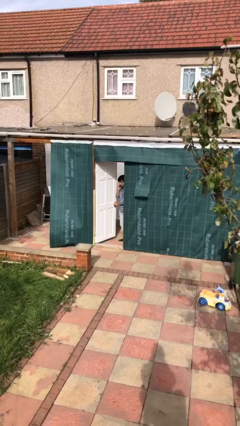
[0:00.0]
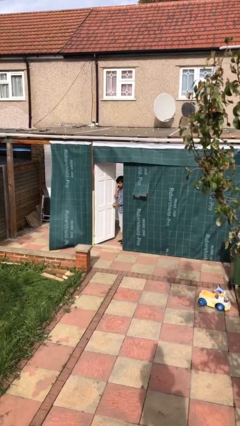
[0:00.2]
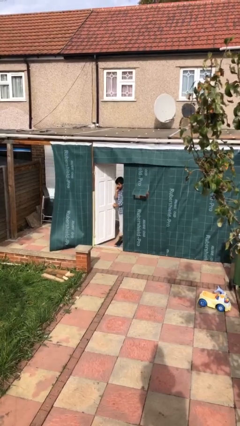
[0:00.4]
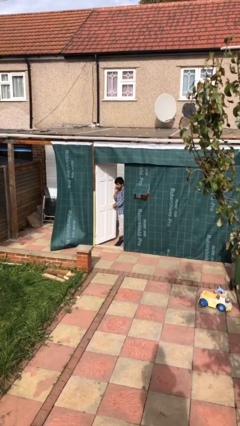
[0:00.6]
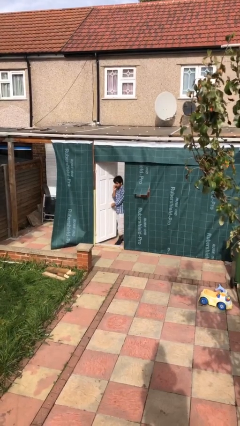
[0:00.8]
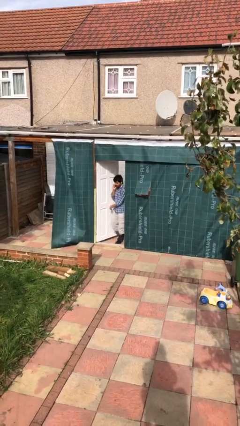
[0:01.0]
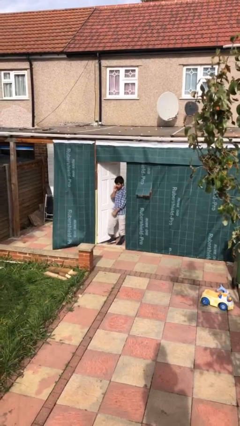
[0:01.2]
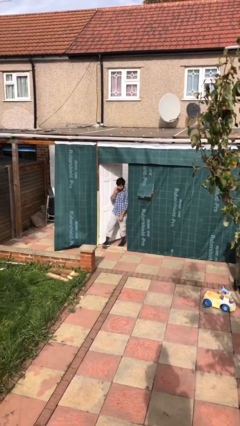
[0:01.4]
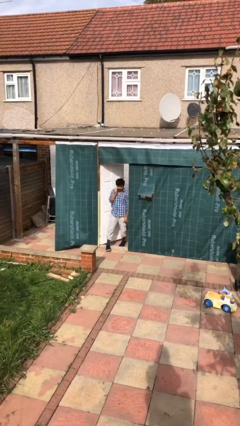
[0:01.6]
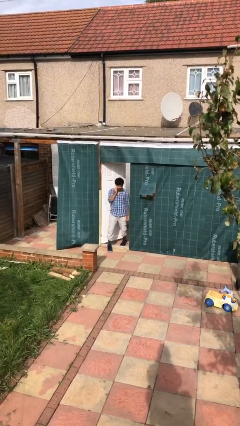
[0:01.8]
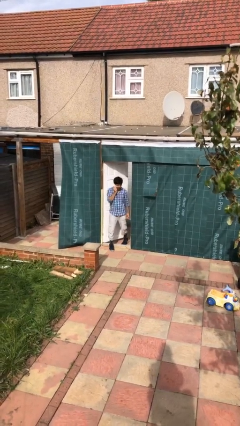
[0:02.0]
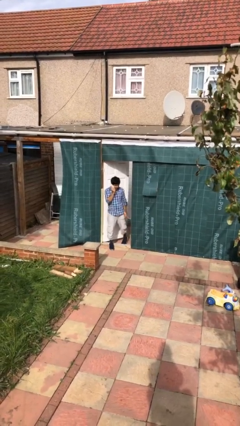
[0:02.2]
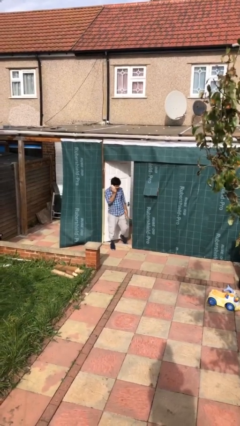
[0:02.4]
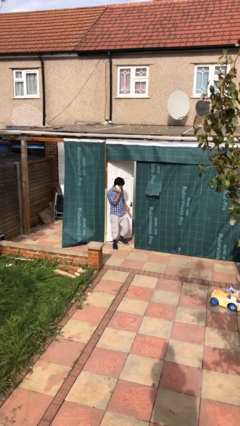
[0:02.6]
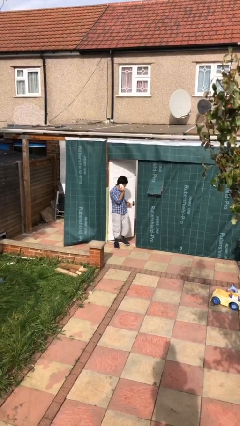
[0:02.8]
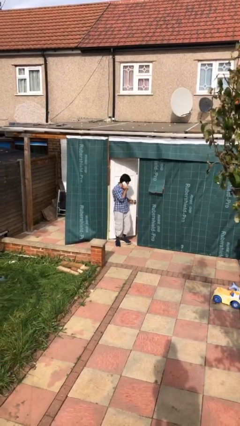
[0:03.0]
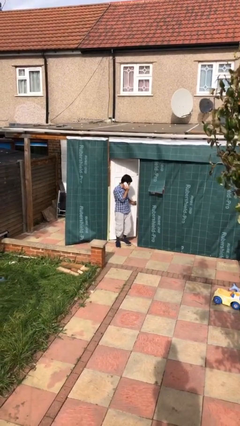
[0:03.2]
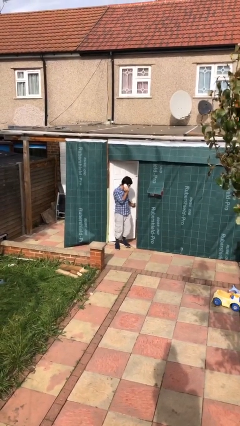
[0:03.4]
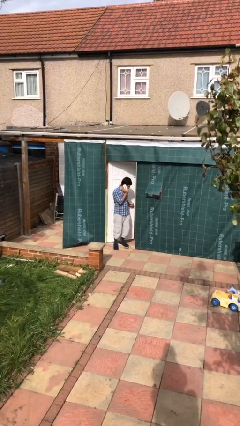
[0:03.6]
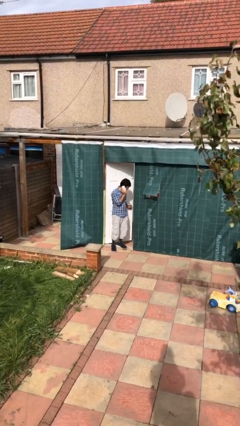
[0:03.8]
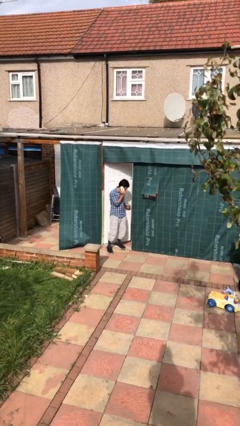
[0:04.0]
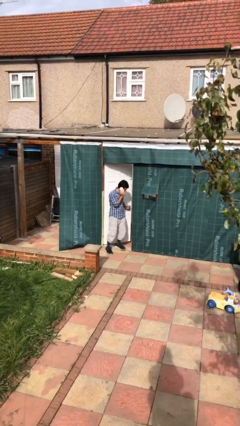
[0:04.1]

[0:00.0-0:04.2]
person enters scene through structure

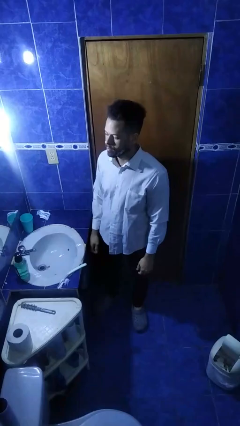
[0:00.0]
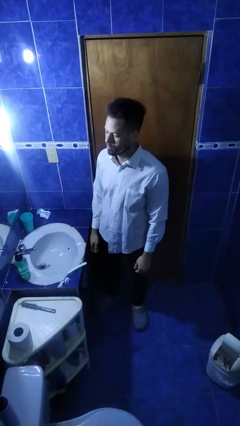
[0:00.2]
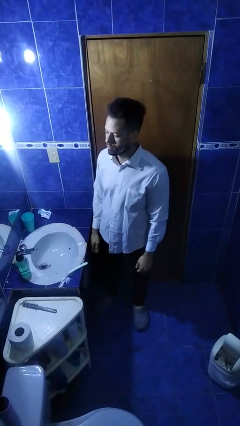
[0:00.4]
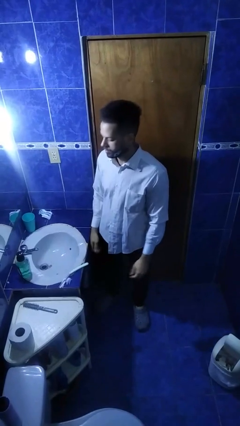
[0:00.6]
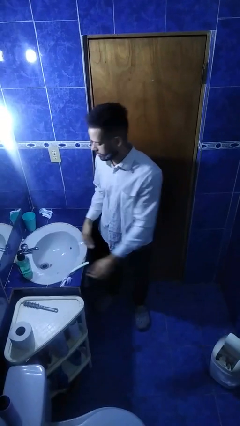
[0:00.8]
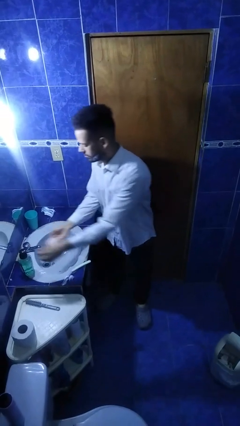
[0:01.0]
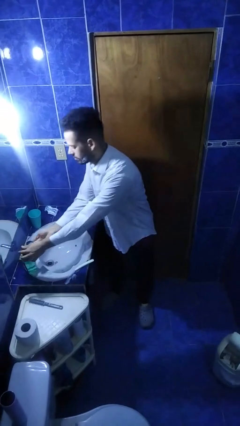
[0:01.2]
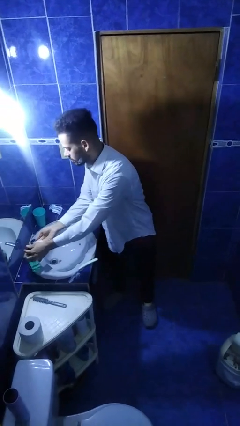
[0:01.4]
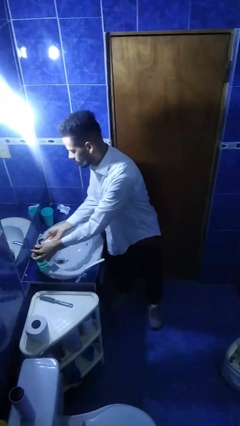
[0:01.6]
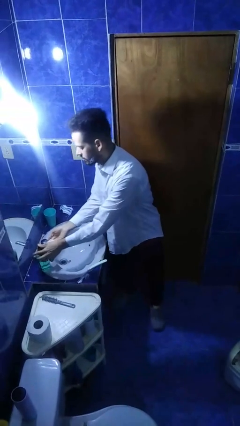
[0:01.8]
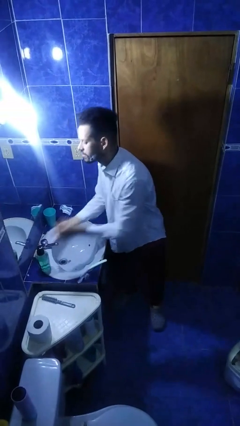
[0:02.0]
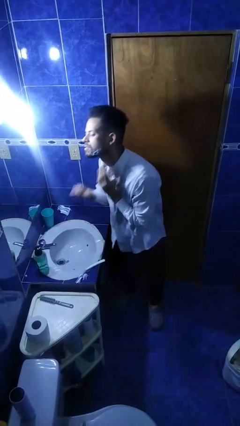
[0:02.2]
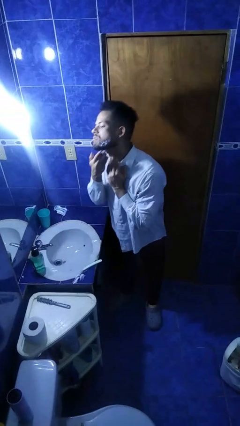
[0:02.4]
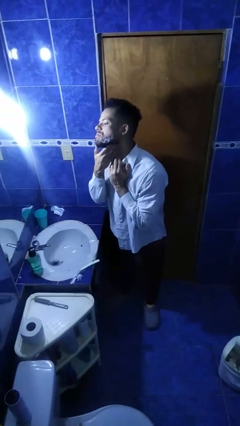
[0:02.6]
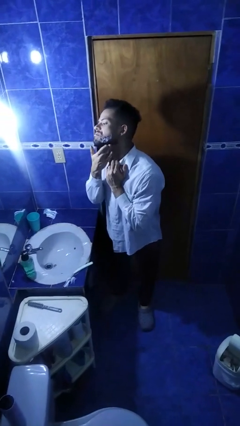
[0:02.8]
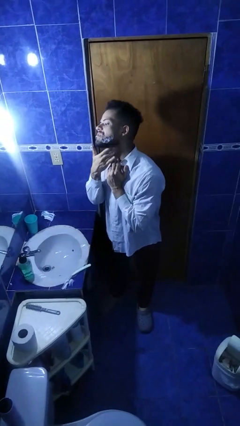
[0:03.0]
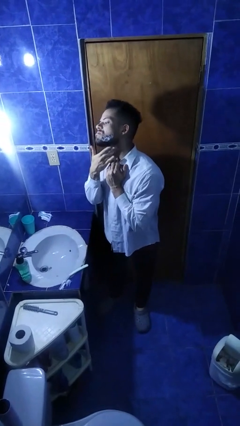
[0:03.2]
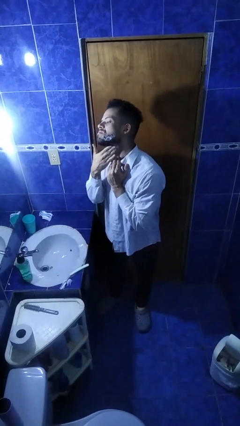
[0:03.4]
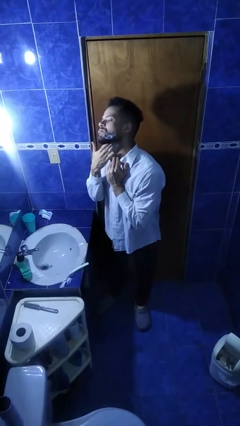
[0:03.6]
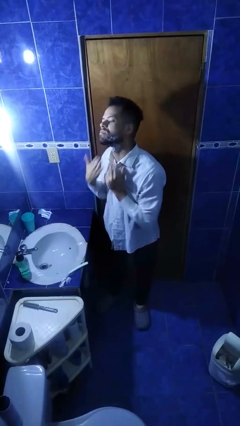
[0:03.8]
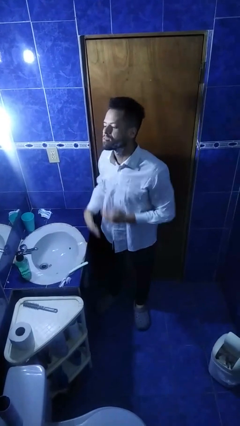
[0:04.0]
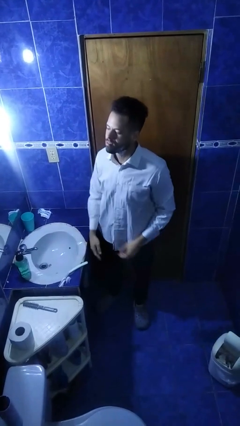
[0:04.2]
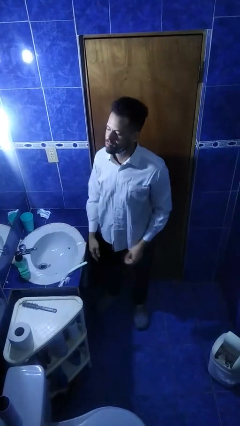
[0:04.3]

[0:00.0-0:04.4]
person applies shaving cream

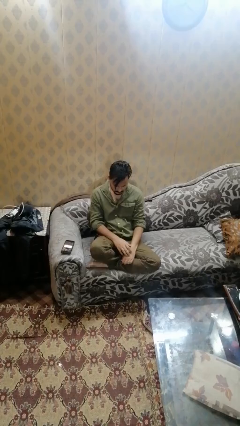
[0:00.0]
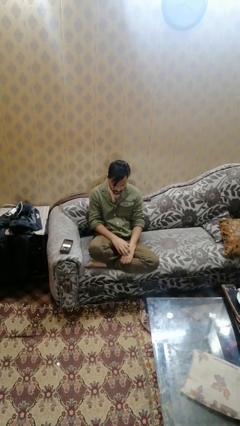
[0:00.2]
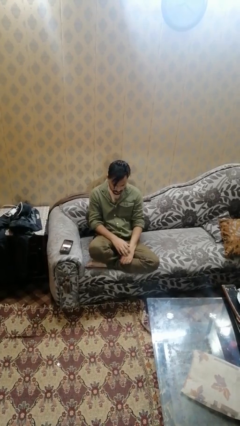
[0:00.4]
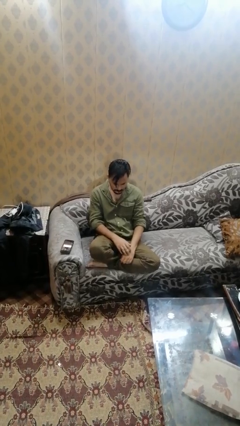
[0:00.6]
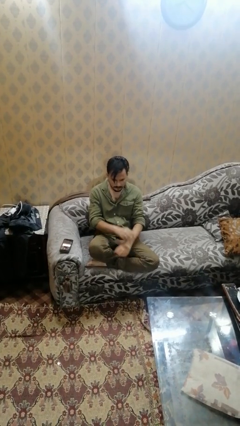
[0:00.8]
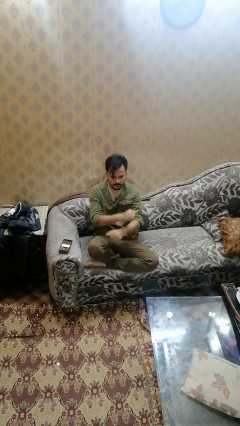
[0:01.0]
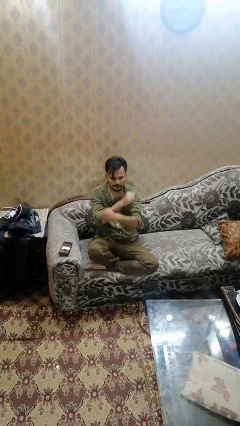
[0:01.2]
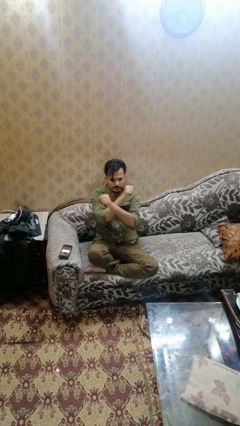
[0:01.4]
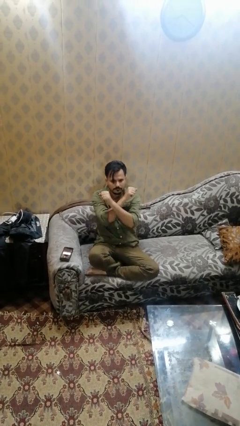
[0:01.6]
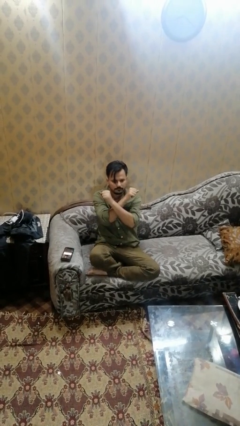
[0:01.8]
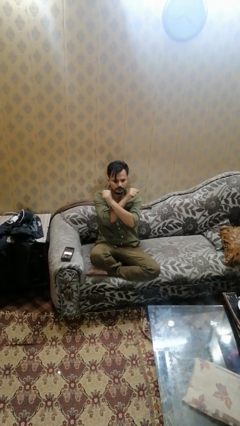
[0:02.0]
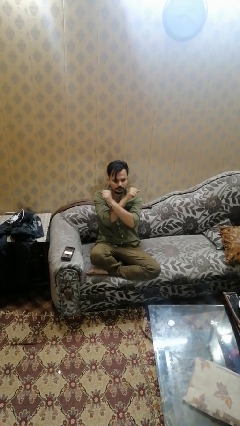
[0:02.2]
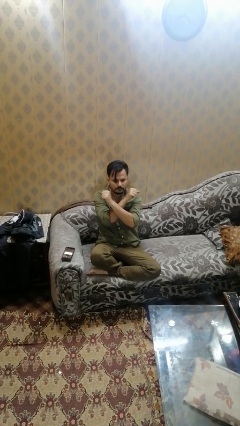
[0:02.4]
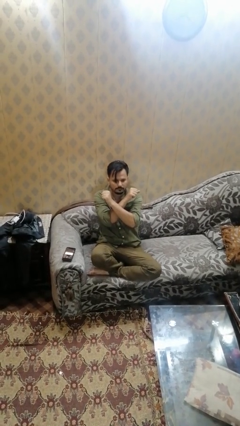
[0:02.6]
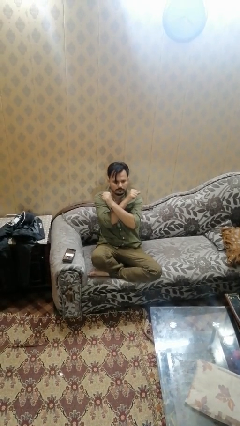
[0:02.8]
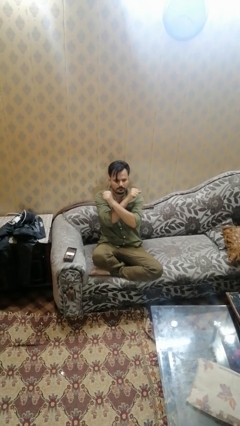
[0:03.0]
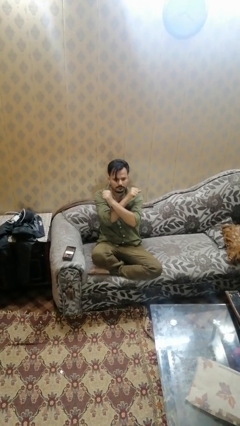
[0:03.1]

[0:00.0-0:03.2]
person gestures arms x

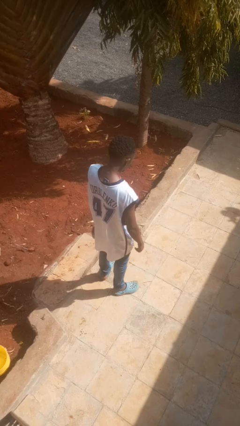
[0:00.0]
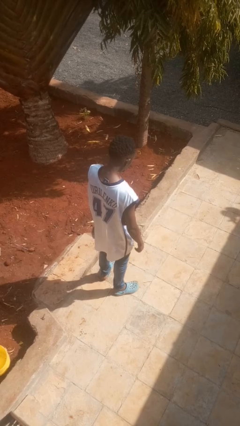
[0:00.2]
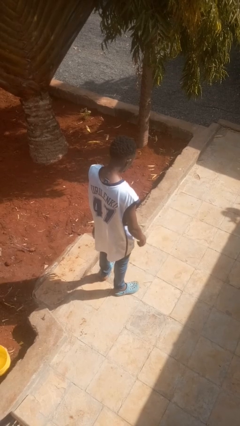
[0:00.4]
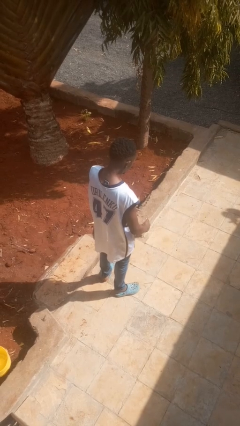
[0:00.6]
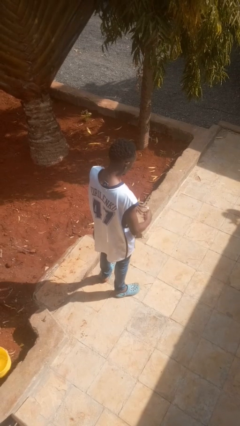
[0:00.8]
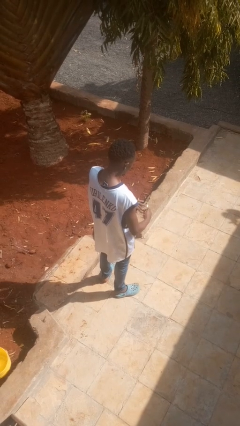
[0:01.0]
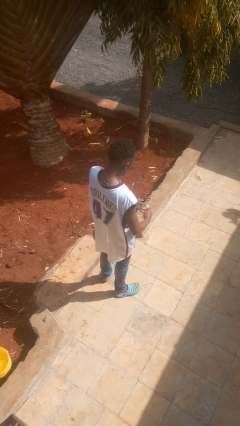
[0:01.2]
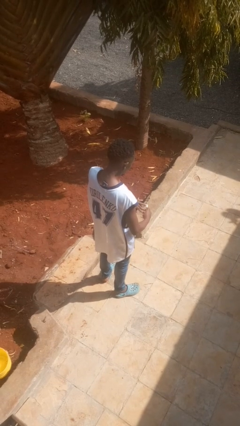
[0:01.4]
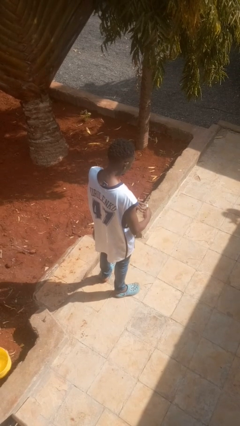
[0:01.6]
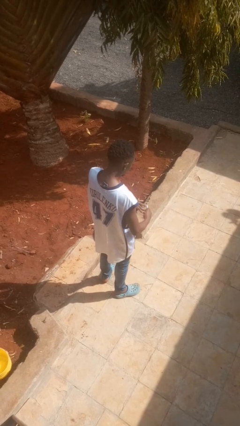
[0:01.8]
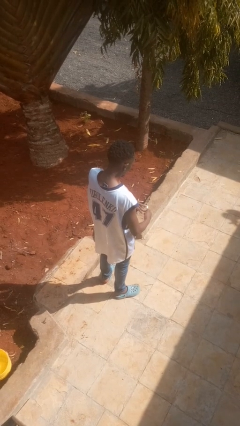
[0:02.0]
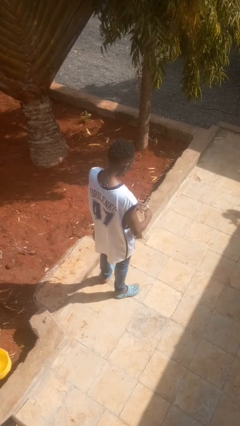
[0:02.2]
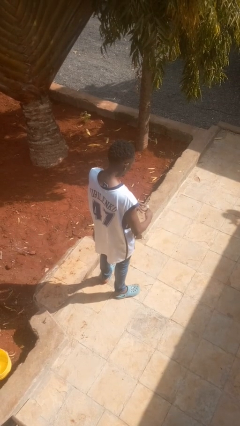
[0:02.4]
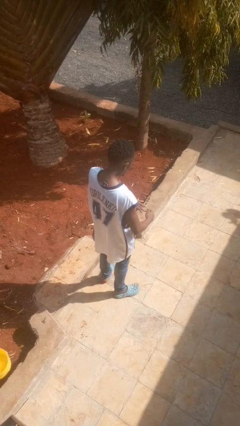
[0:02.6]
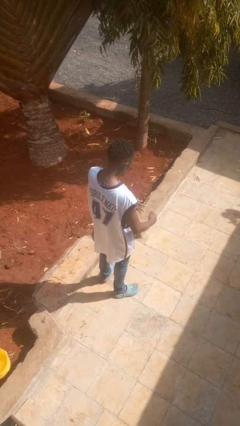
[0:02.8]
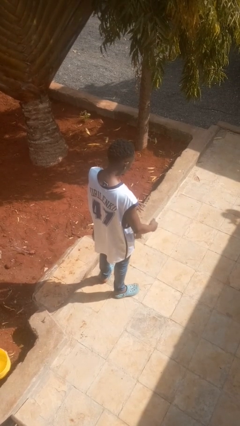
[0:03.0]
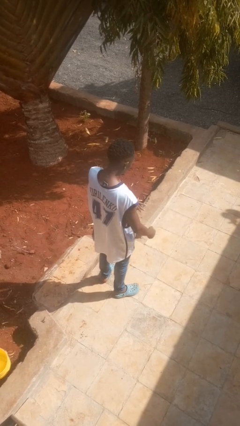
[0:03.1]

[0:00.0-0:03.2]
person clips fingernails

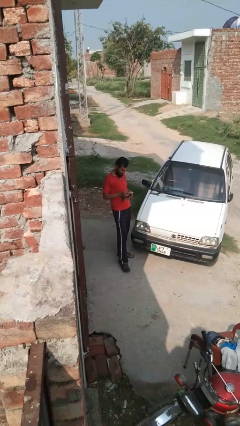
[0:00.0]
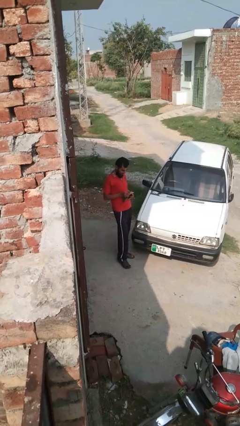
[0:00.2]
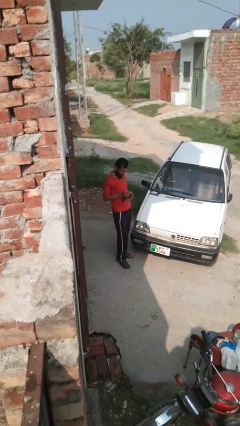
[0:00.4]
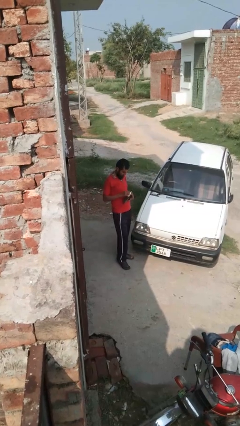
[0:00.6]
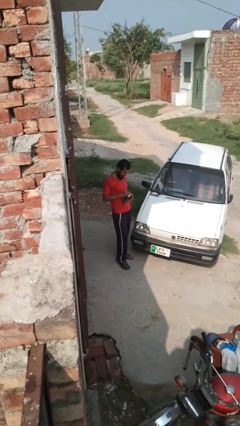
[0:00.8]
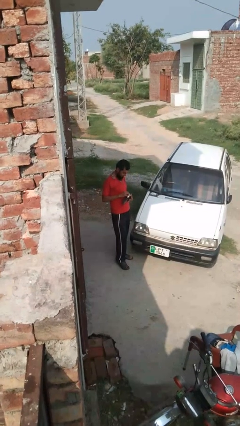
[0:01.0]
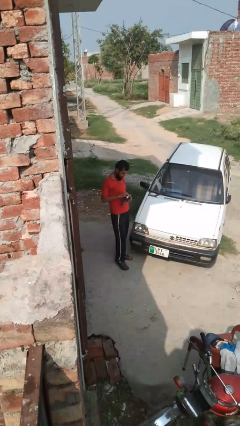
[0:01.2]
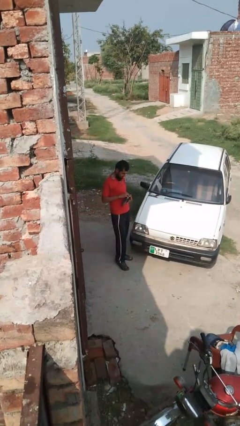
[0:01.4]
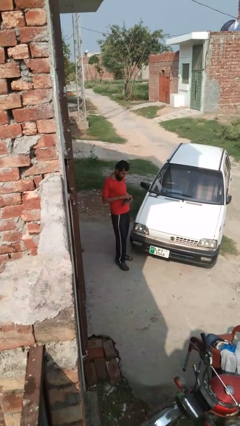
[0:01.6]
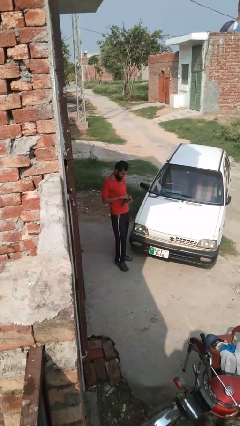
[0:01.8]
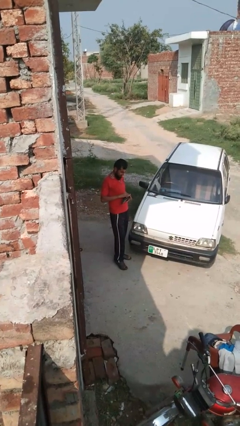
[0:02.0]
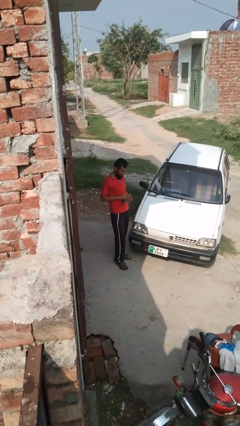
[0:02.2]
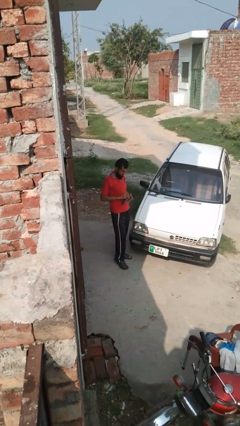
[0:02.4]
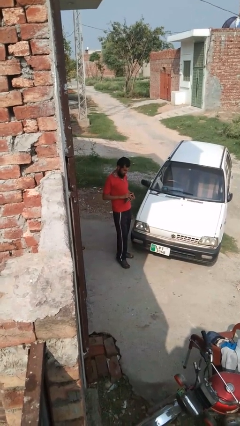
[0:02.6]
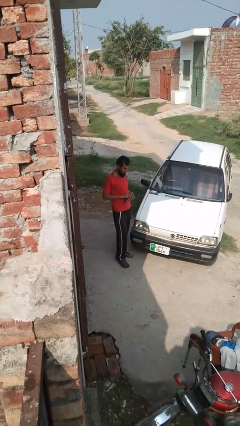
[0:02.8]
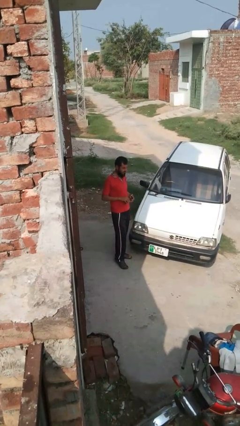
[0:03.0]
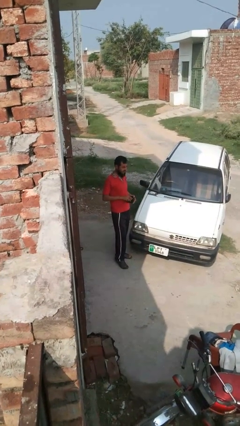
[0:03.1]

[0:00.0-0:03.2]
person puts object into purse
